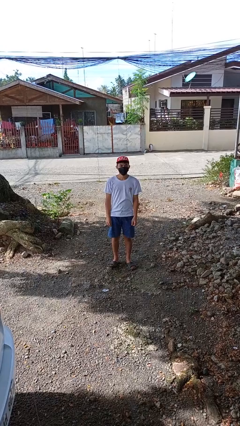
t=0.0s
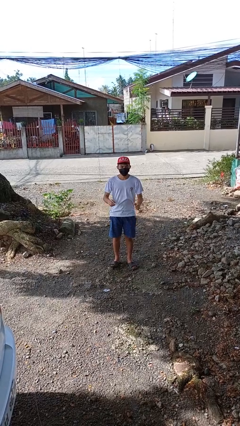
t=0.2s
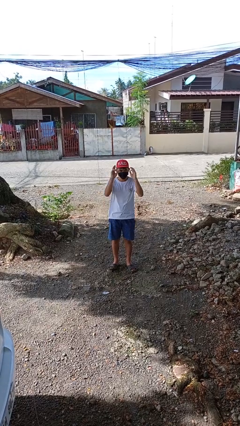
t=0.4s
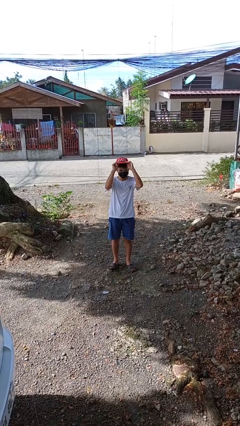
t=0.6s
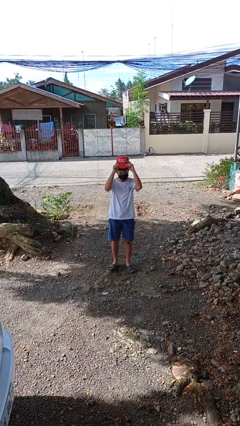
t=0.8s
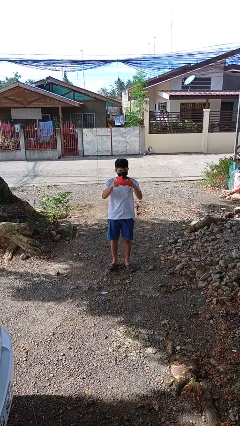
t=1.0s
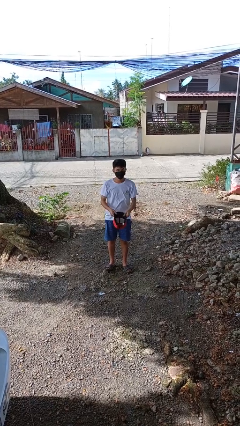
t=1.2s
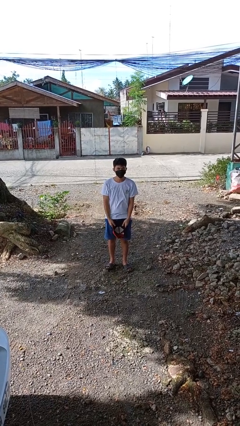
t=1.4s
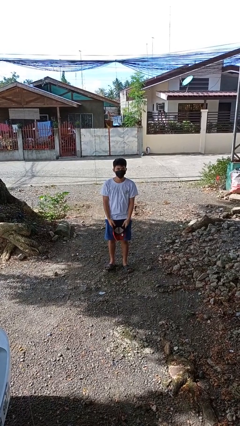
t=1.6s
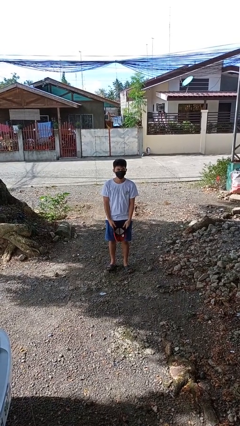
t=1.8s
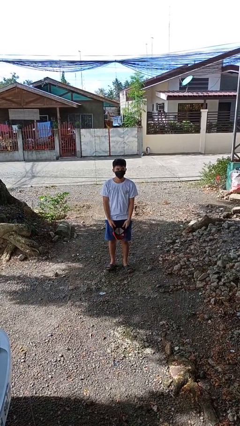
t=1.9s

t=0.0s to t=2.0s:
person takes off hat

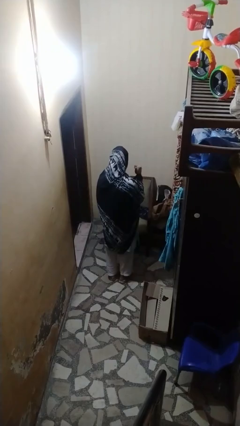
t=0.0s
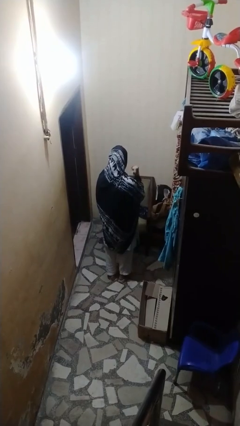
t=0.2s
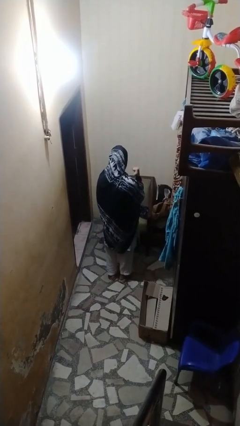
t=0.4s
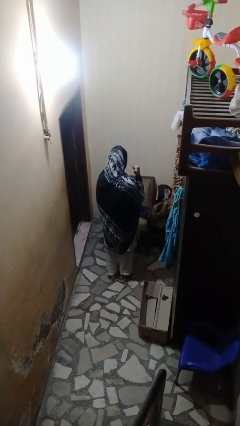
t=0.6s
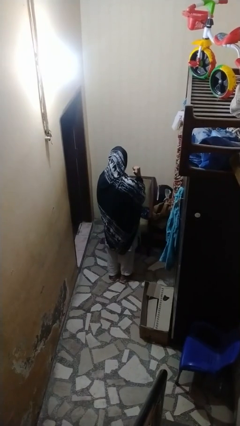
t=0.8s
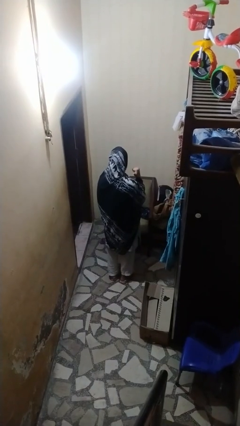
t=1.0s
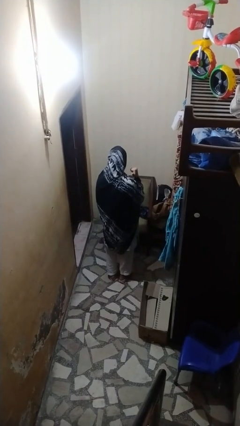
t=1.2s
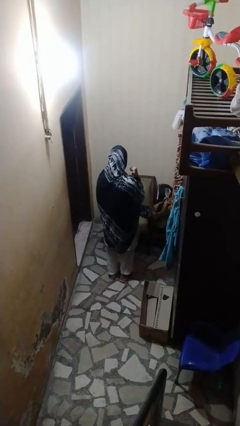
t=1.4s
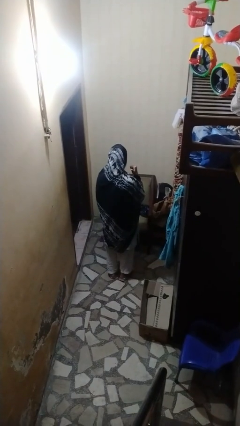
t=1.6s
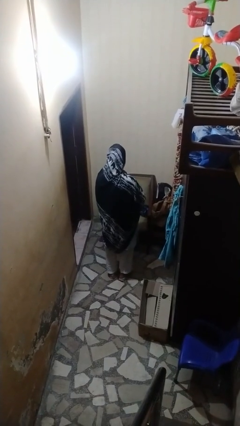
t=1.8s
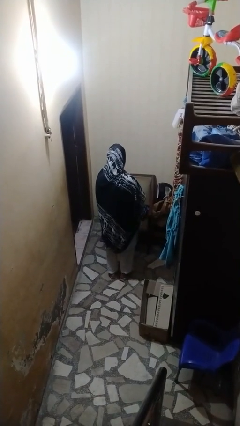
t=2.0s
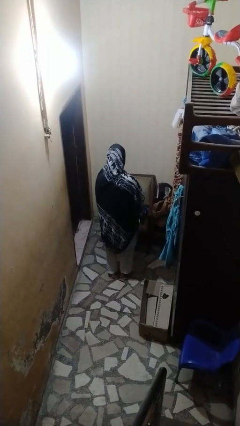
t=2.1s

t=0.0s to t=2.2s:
person gestures behind me

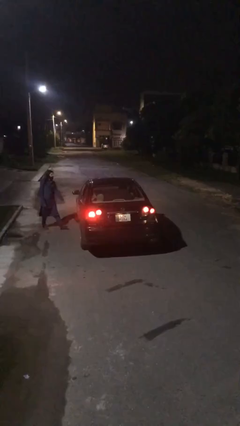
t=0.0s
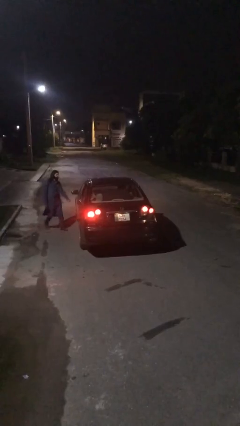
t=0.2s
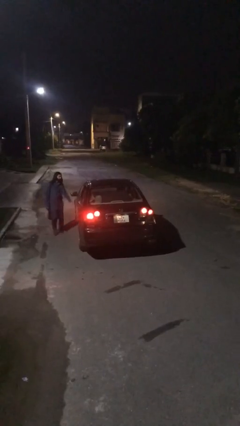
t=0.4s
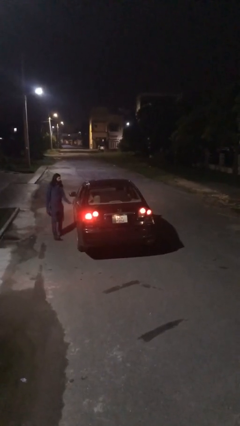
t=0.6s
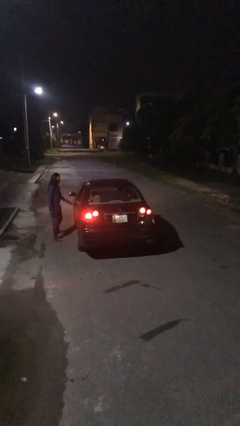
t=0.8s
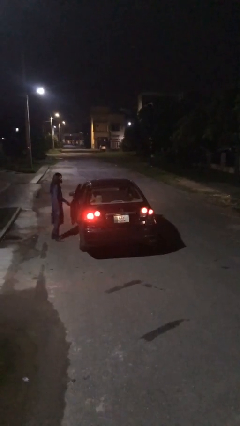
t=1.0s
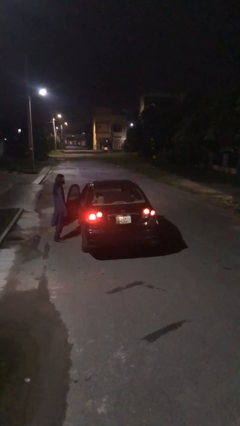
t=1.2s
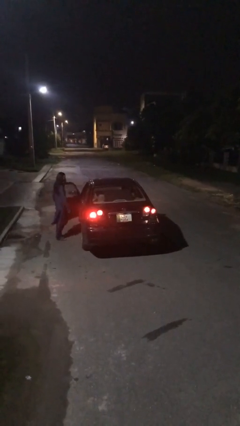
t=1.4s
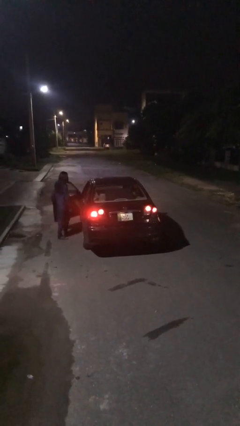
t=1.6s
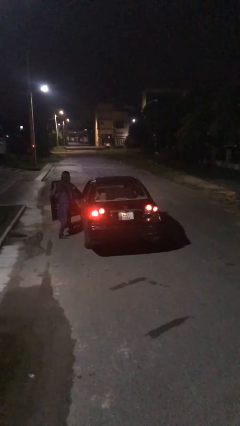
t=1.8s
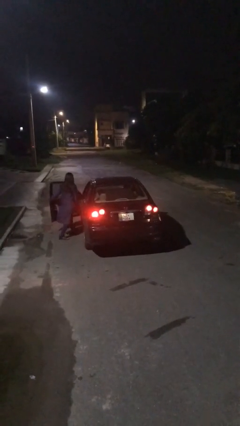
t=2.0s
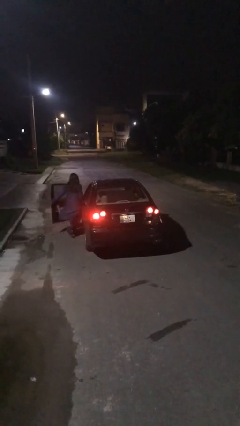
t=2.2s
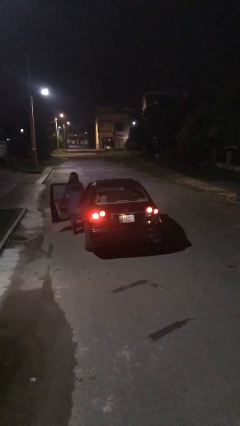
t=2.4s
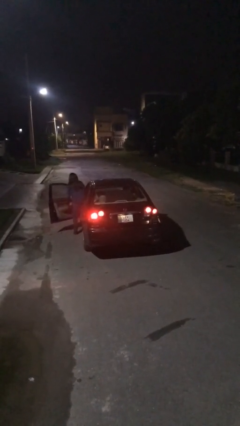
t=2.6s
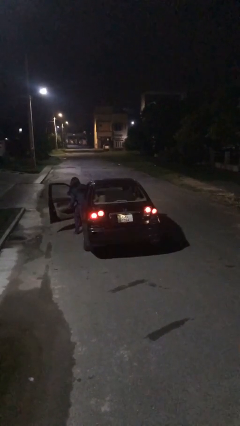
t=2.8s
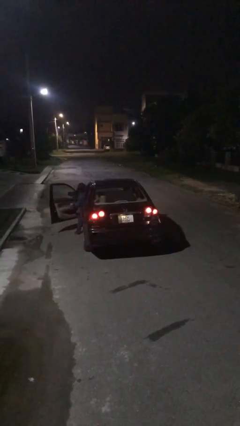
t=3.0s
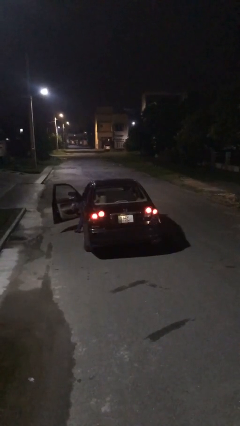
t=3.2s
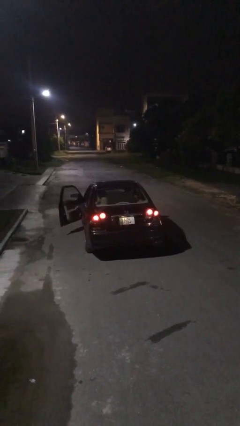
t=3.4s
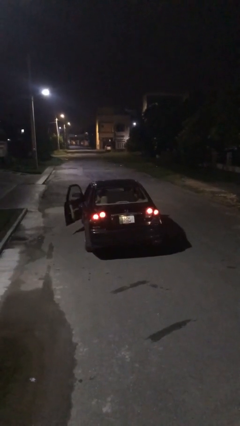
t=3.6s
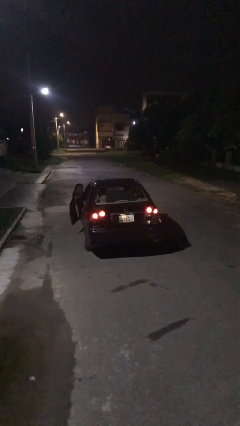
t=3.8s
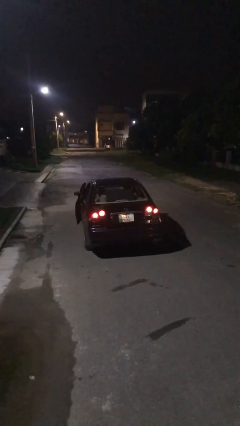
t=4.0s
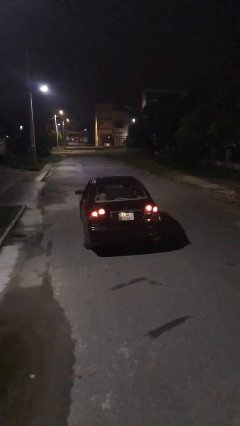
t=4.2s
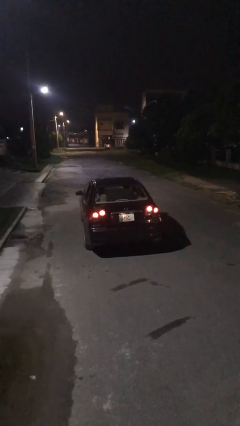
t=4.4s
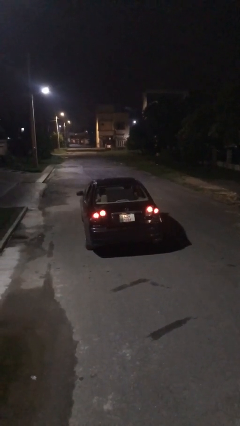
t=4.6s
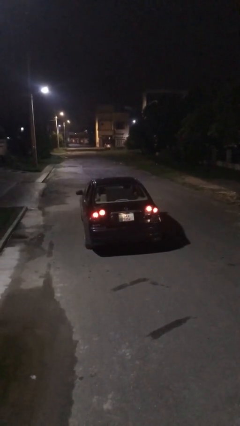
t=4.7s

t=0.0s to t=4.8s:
car picks up person

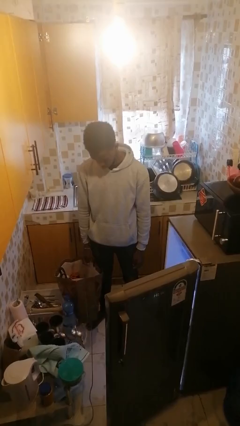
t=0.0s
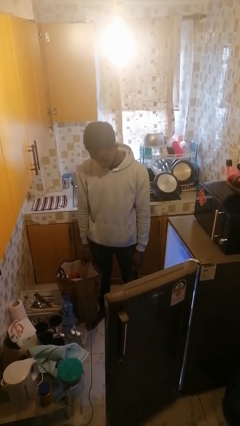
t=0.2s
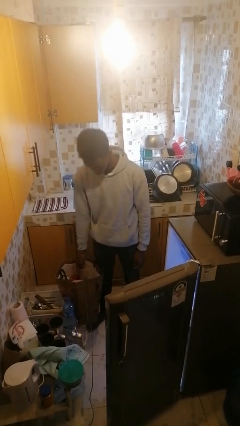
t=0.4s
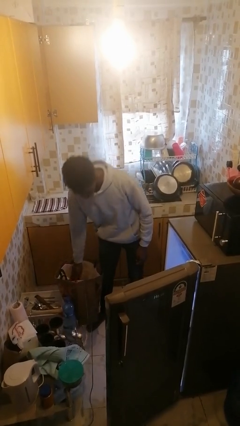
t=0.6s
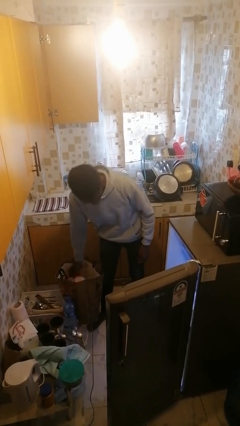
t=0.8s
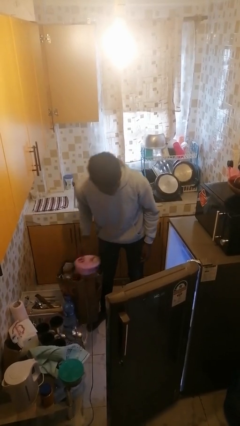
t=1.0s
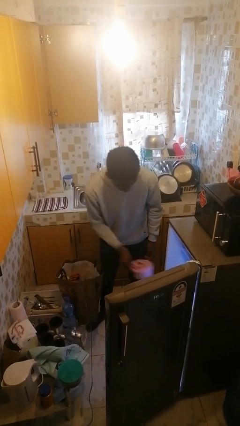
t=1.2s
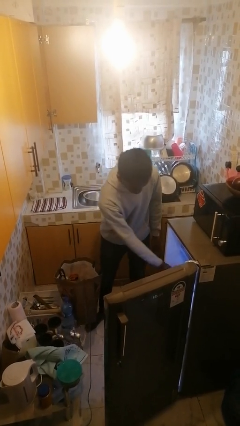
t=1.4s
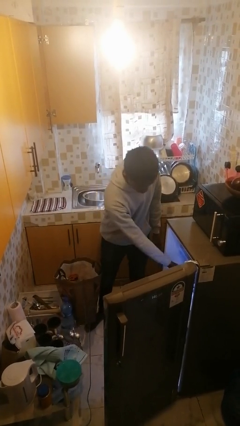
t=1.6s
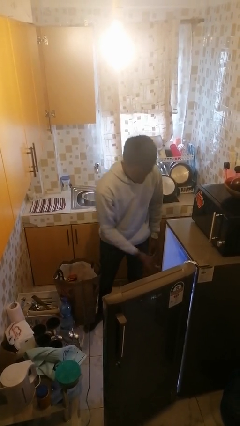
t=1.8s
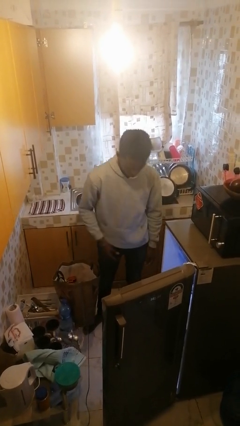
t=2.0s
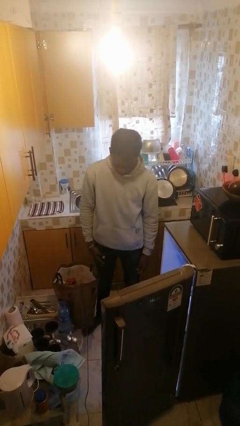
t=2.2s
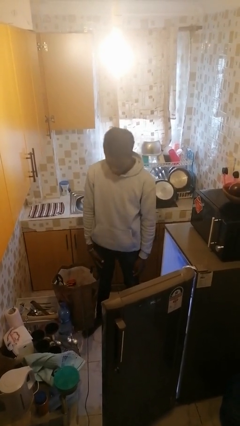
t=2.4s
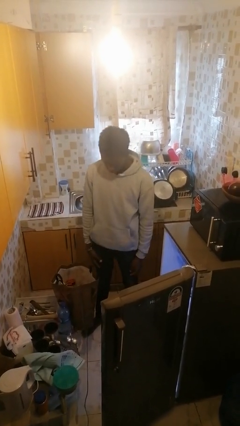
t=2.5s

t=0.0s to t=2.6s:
person loads groceries into refrigerator

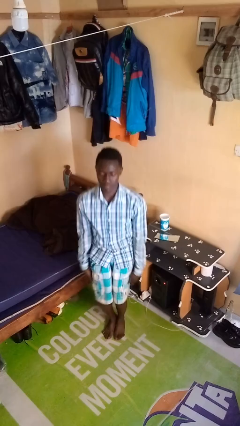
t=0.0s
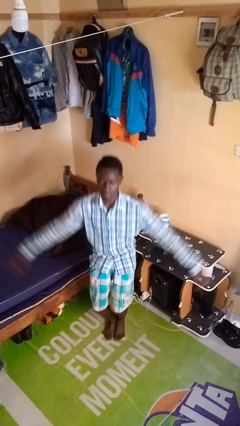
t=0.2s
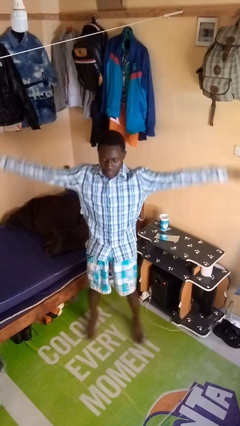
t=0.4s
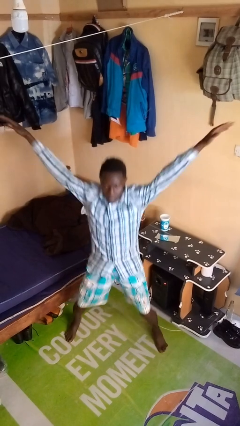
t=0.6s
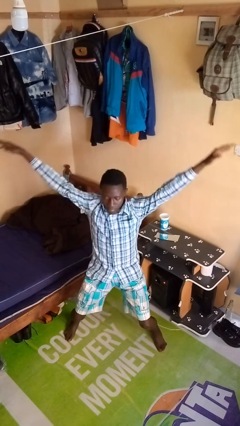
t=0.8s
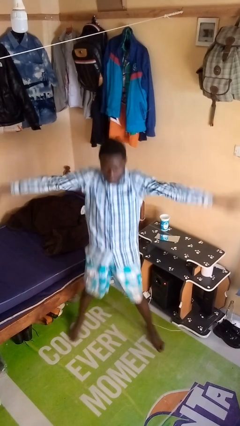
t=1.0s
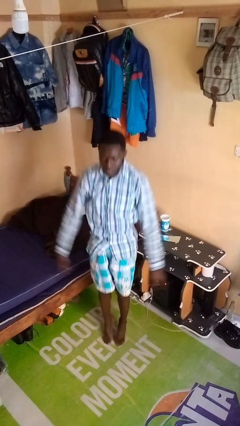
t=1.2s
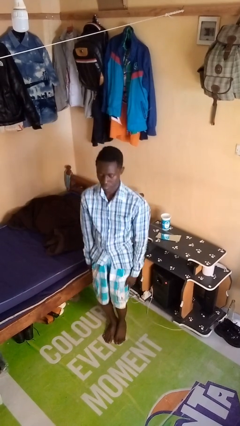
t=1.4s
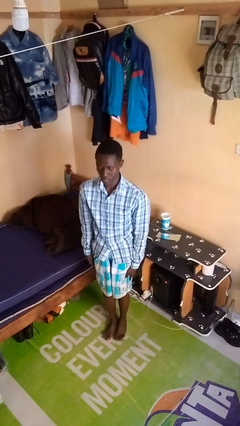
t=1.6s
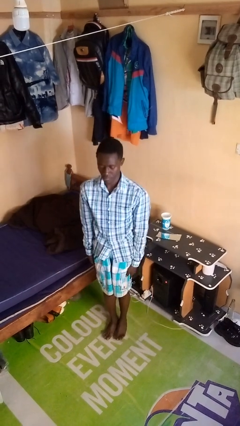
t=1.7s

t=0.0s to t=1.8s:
person exercises with jumping jacks

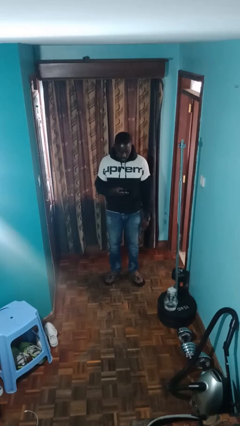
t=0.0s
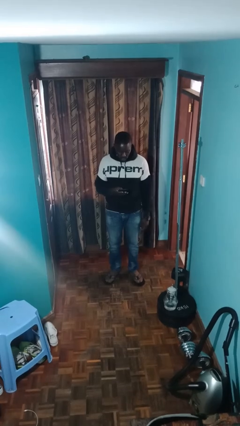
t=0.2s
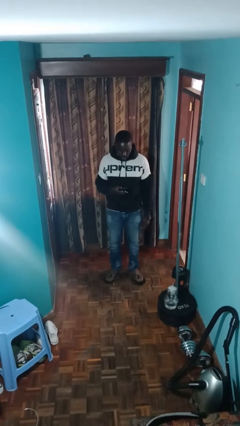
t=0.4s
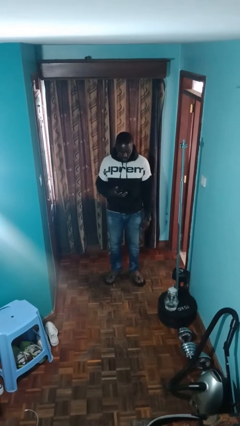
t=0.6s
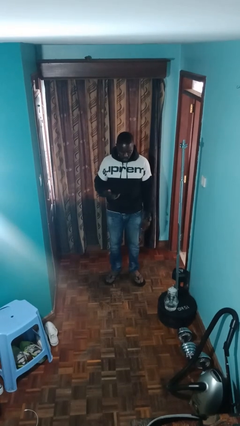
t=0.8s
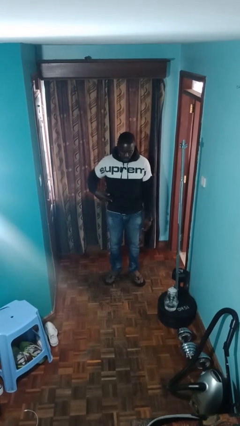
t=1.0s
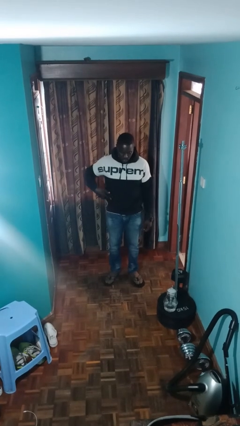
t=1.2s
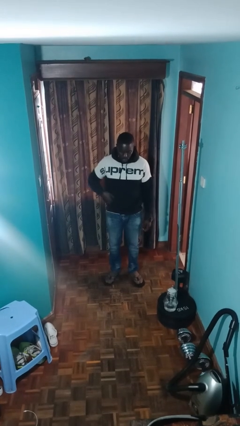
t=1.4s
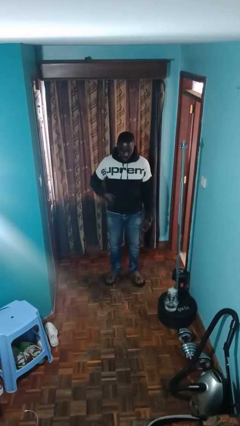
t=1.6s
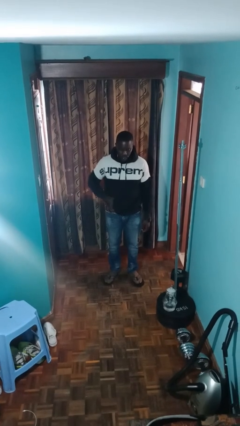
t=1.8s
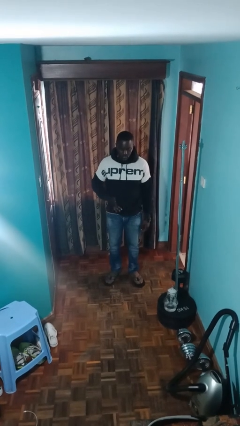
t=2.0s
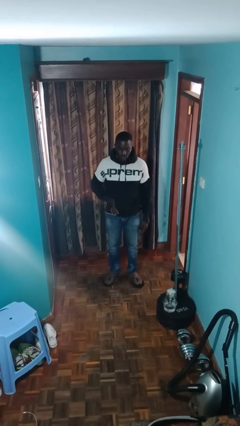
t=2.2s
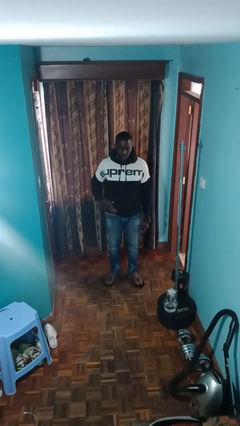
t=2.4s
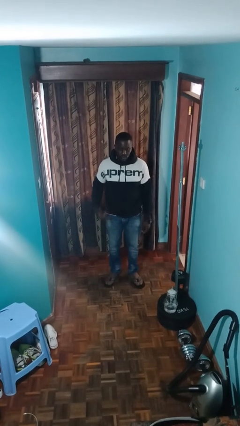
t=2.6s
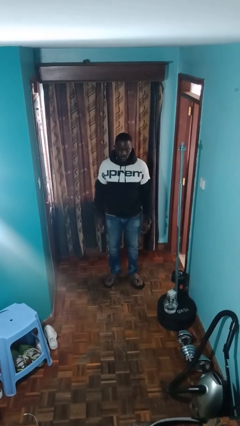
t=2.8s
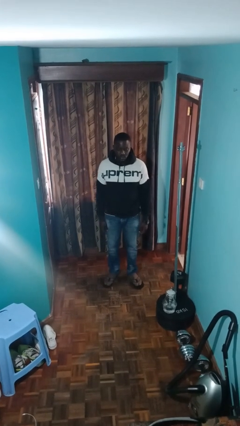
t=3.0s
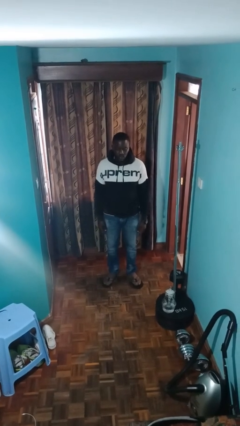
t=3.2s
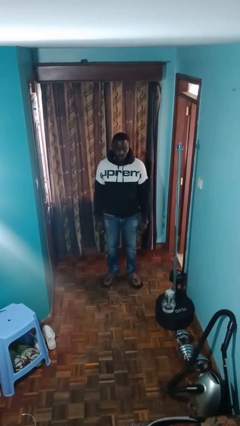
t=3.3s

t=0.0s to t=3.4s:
person puts phone into pocket

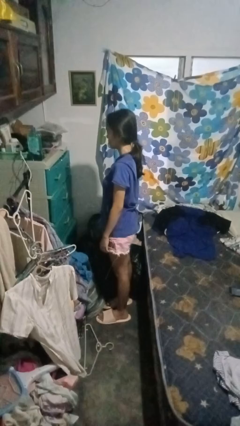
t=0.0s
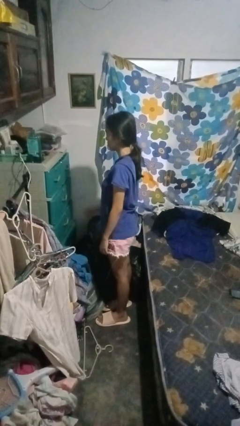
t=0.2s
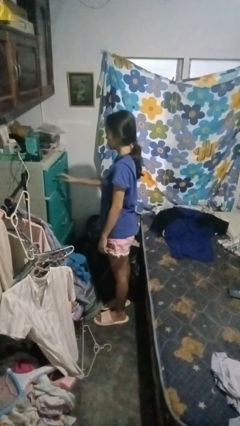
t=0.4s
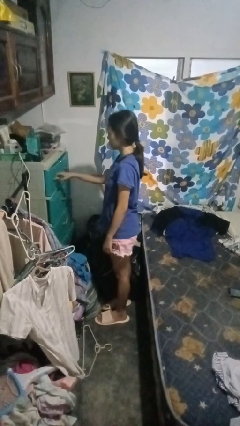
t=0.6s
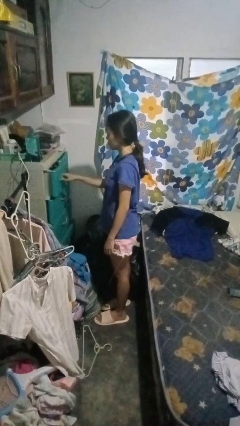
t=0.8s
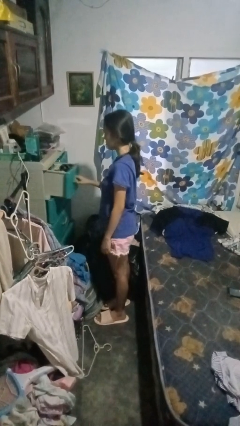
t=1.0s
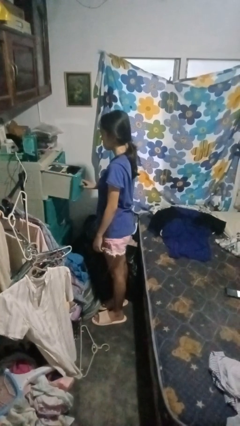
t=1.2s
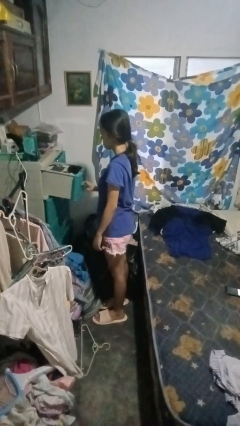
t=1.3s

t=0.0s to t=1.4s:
person opens dresser drawer
